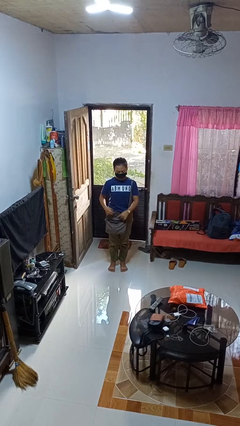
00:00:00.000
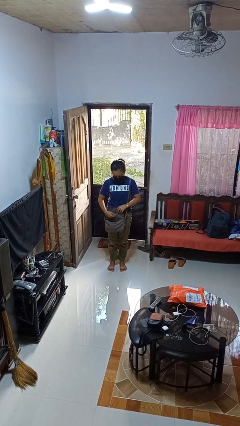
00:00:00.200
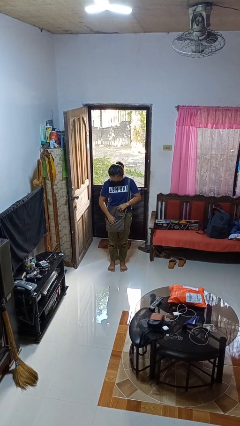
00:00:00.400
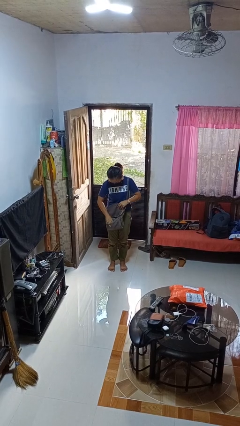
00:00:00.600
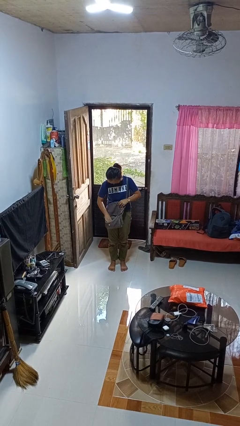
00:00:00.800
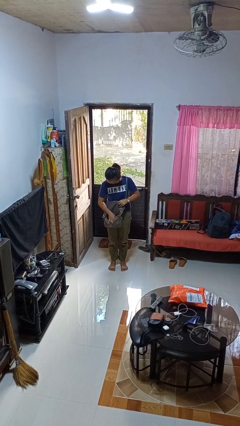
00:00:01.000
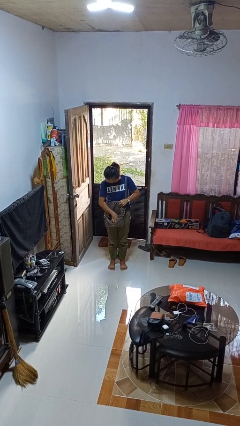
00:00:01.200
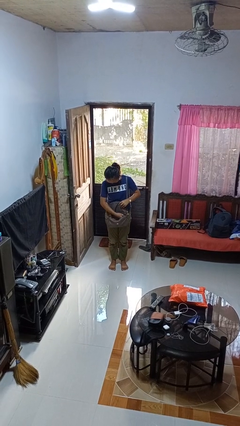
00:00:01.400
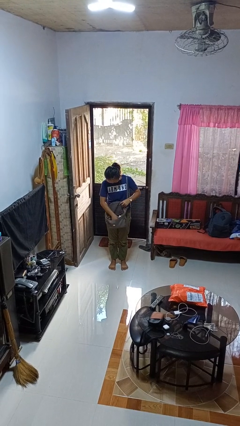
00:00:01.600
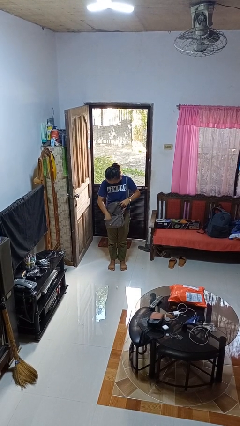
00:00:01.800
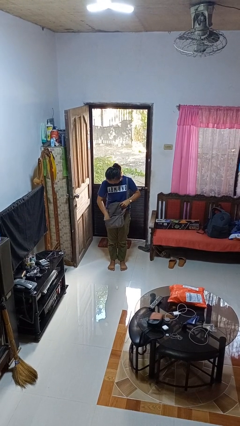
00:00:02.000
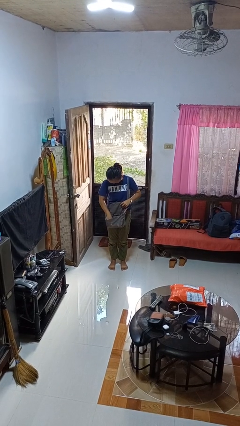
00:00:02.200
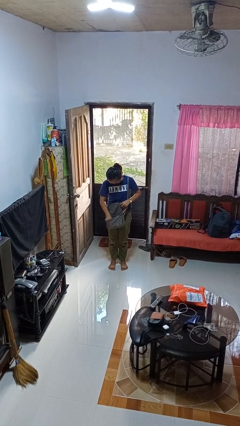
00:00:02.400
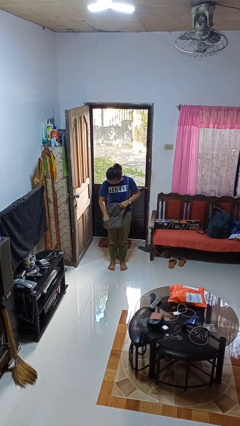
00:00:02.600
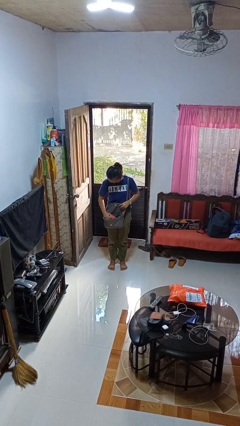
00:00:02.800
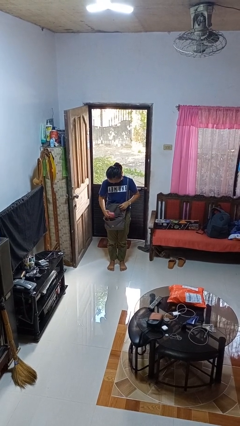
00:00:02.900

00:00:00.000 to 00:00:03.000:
person searches in purse

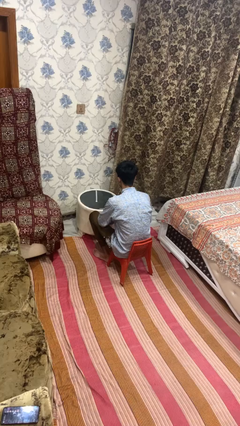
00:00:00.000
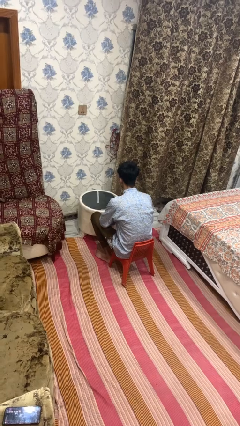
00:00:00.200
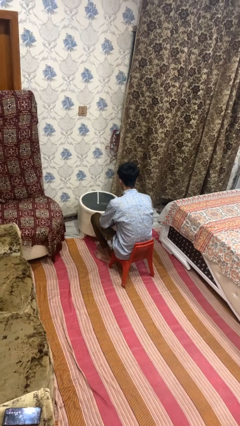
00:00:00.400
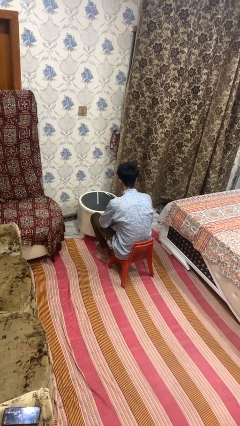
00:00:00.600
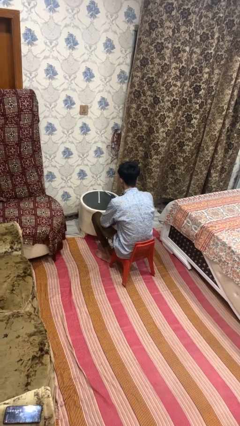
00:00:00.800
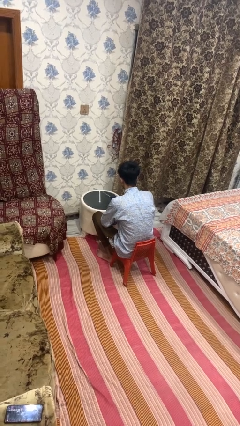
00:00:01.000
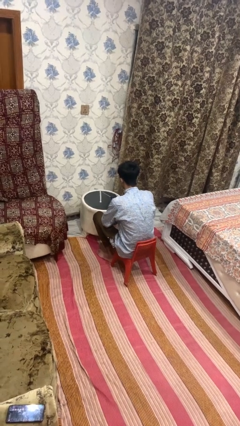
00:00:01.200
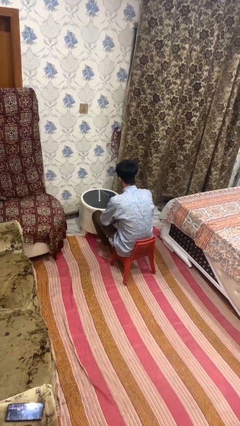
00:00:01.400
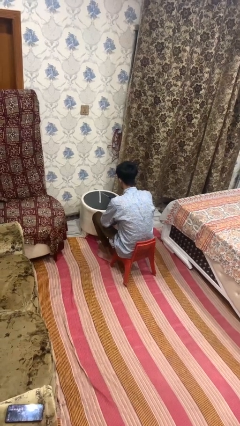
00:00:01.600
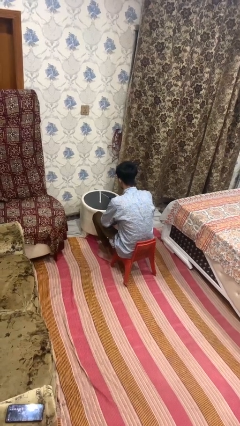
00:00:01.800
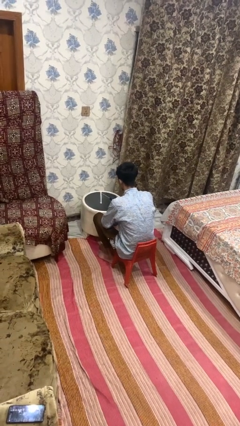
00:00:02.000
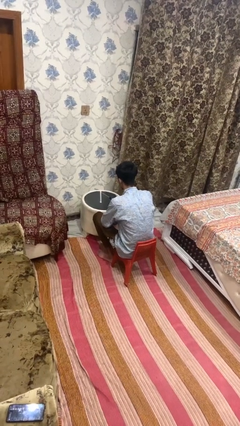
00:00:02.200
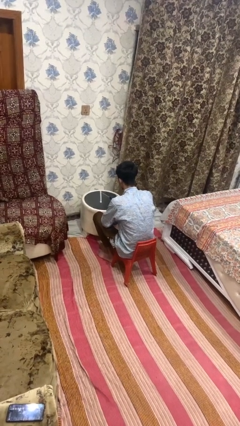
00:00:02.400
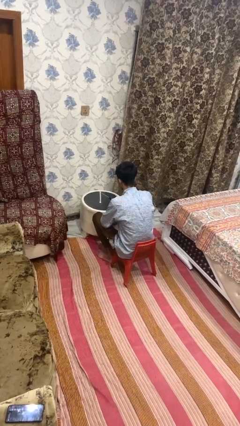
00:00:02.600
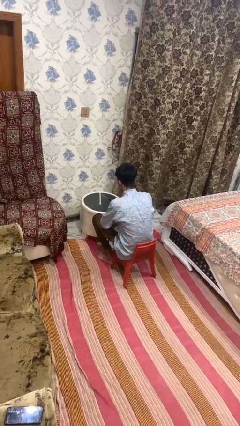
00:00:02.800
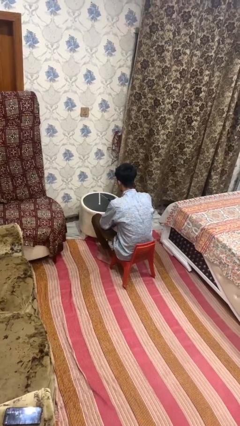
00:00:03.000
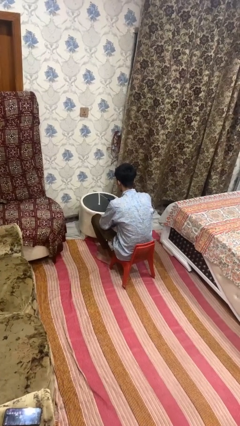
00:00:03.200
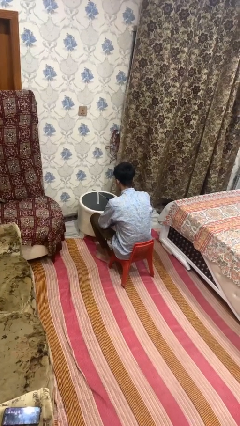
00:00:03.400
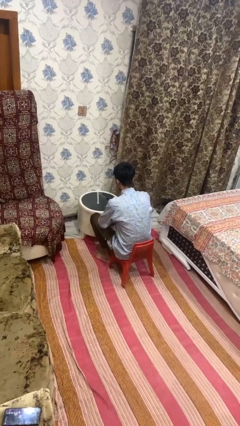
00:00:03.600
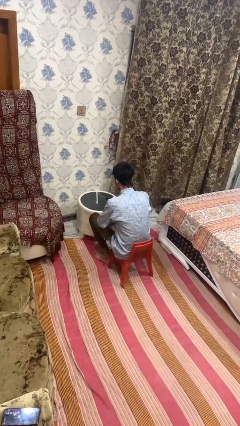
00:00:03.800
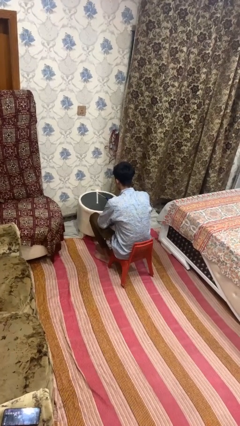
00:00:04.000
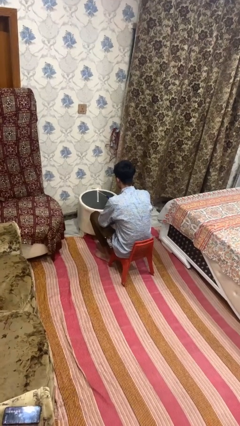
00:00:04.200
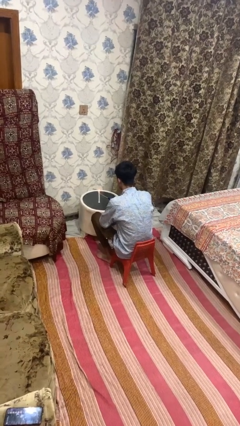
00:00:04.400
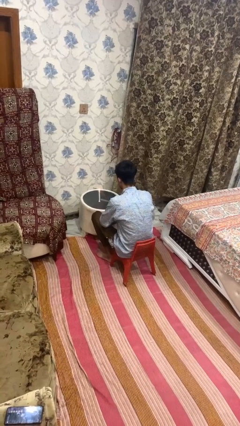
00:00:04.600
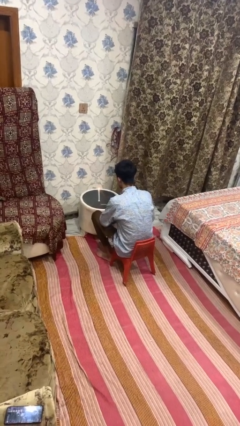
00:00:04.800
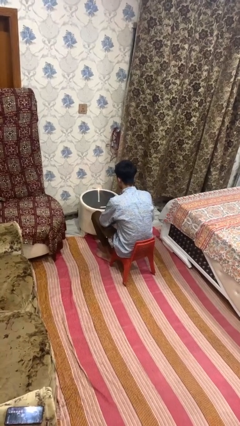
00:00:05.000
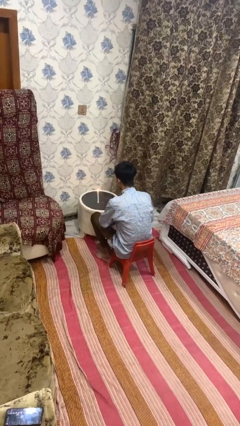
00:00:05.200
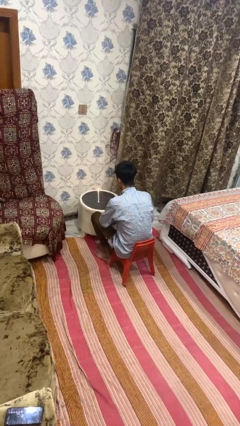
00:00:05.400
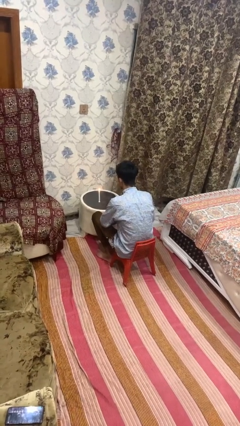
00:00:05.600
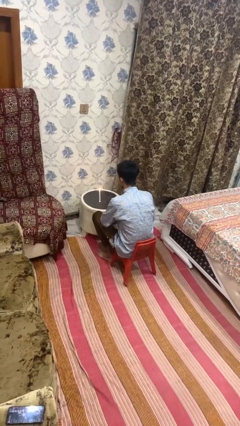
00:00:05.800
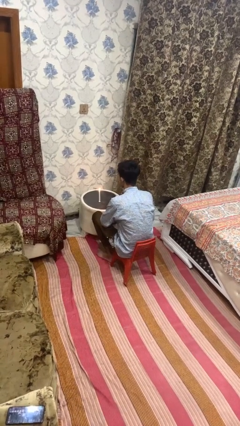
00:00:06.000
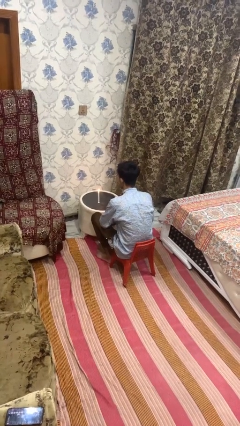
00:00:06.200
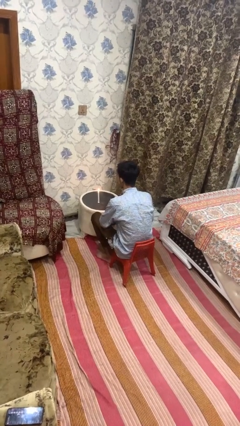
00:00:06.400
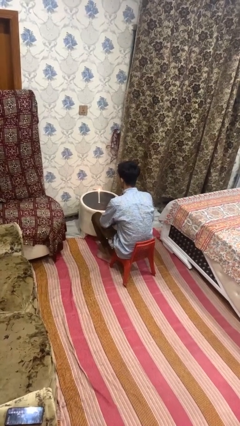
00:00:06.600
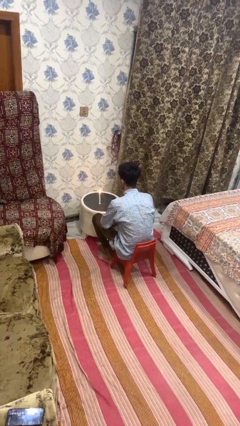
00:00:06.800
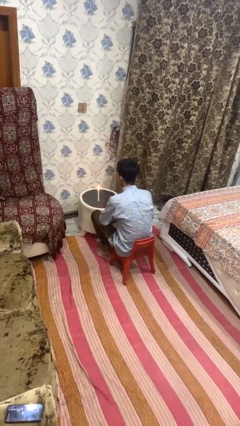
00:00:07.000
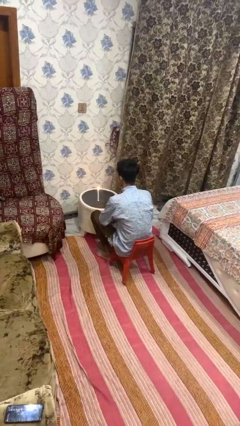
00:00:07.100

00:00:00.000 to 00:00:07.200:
person lights candle

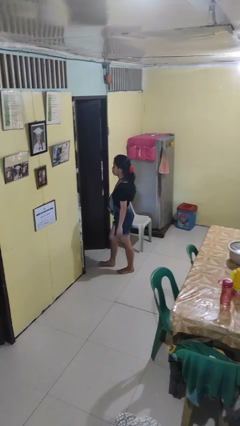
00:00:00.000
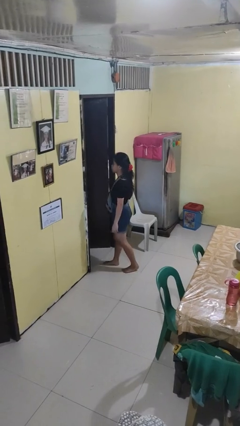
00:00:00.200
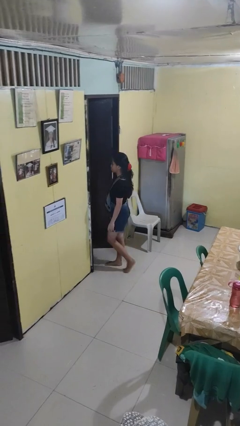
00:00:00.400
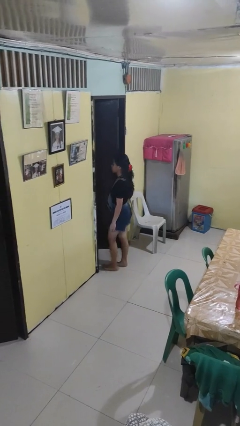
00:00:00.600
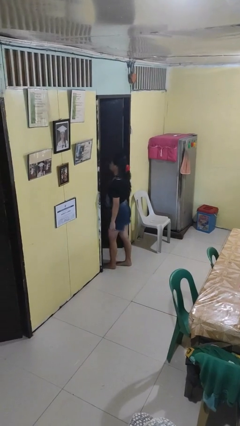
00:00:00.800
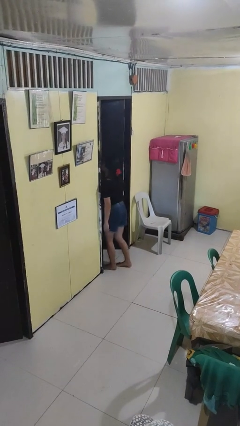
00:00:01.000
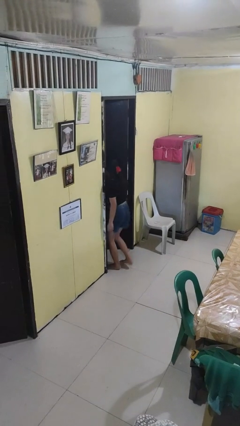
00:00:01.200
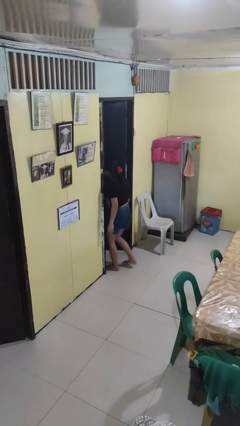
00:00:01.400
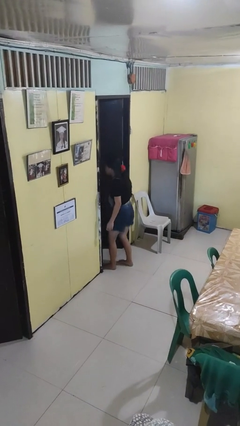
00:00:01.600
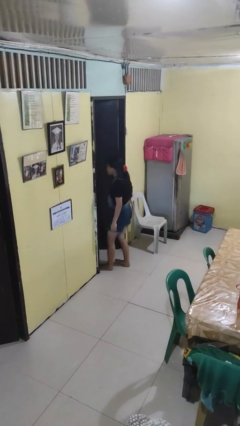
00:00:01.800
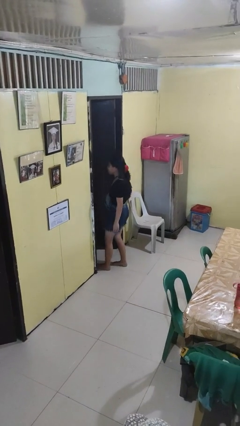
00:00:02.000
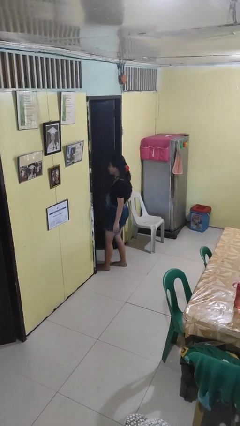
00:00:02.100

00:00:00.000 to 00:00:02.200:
person bumps into wall

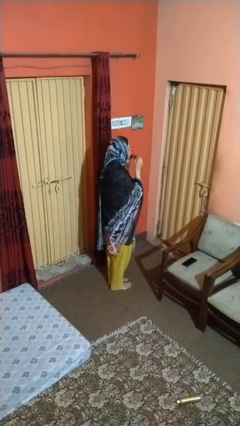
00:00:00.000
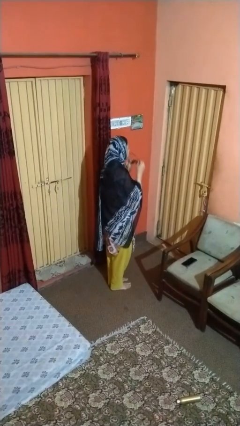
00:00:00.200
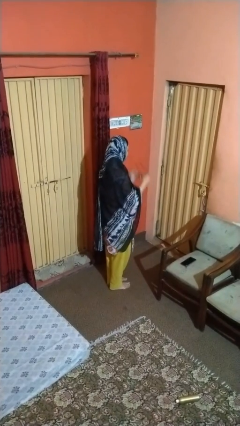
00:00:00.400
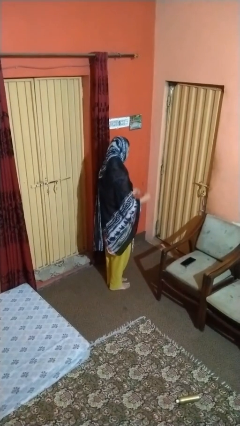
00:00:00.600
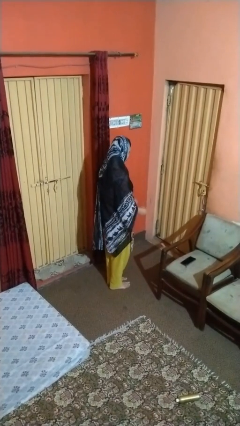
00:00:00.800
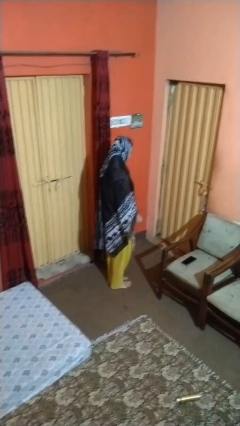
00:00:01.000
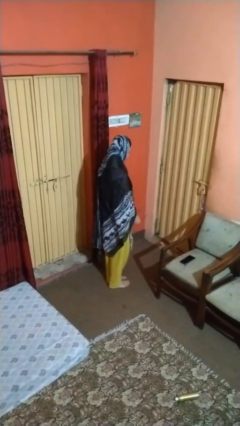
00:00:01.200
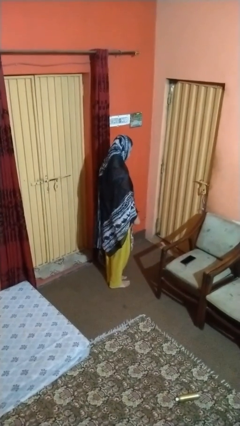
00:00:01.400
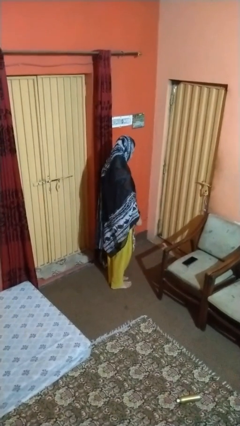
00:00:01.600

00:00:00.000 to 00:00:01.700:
person takes off sunglasses

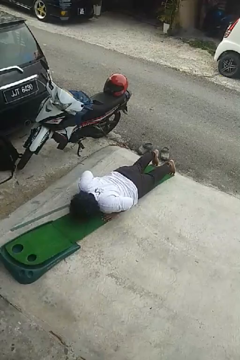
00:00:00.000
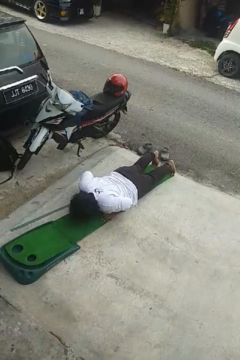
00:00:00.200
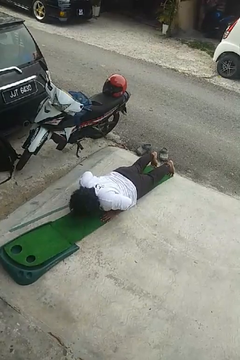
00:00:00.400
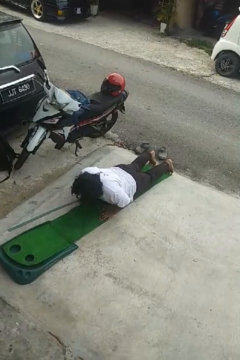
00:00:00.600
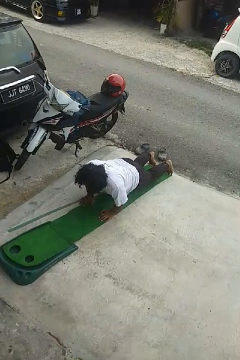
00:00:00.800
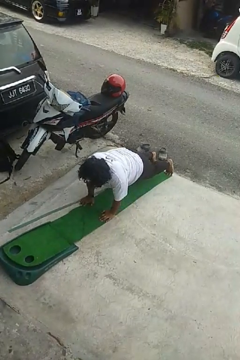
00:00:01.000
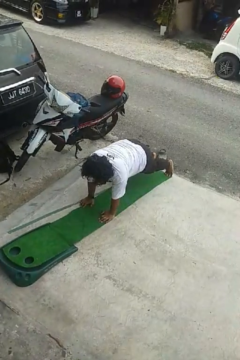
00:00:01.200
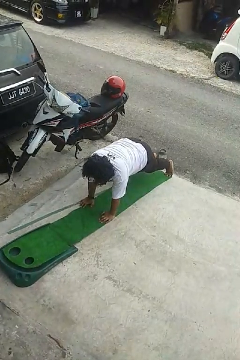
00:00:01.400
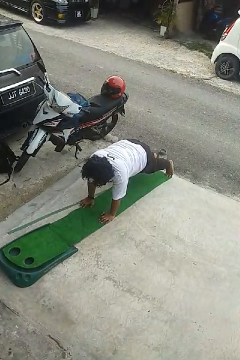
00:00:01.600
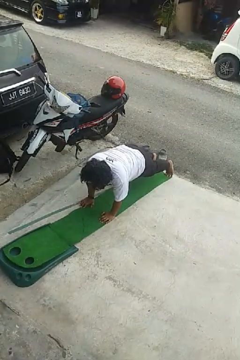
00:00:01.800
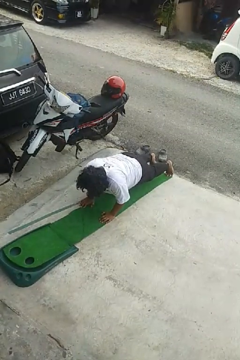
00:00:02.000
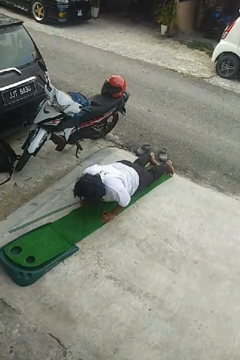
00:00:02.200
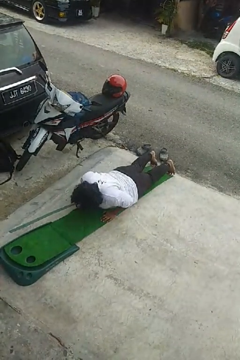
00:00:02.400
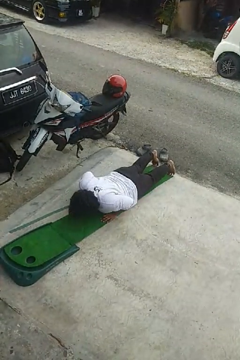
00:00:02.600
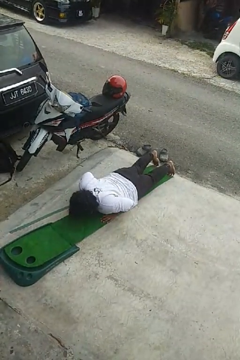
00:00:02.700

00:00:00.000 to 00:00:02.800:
person exercises with pushup

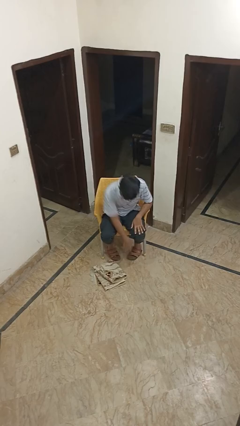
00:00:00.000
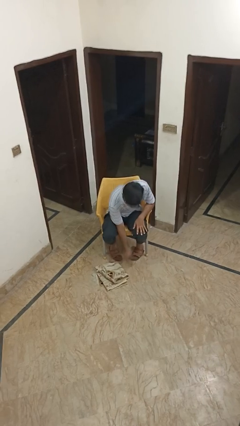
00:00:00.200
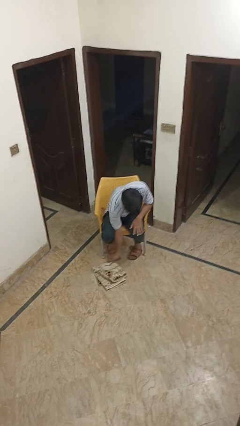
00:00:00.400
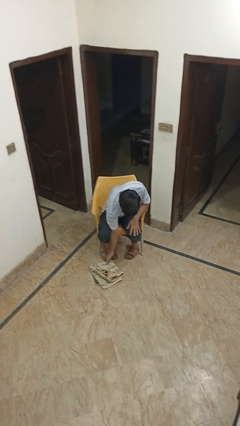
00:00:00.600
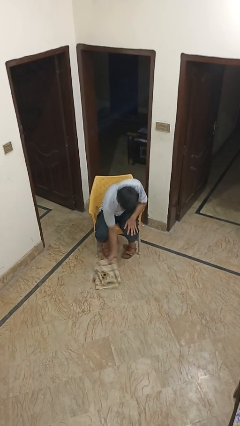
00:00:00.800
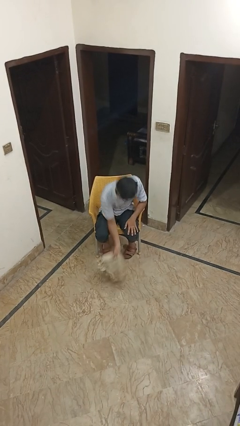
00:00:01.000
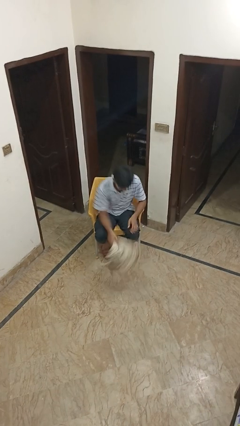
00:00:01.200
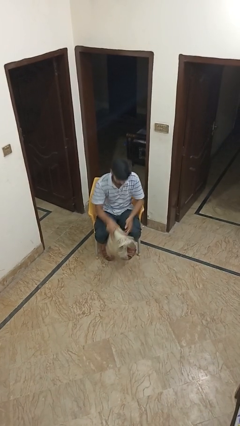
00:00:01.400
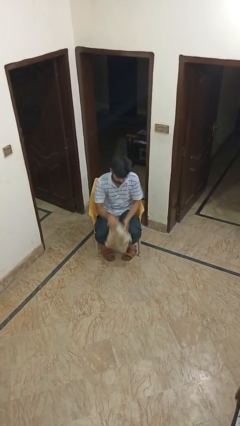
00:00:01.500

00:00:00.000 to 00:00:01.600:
person picks up object from floor
